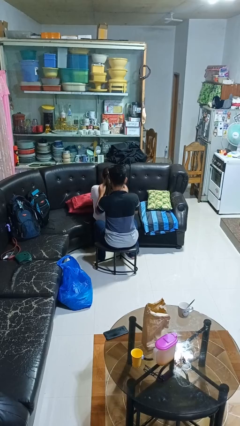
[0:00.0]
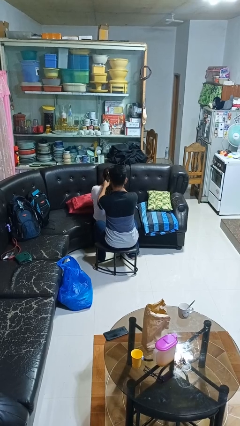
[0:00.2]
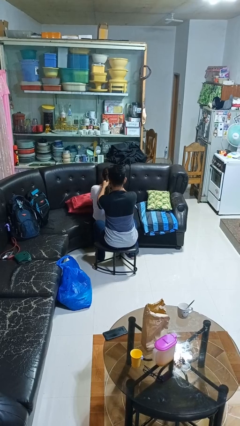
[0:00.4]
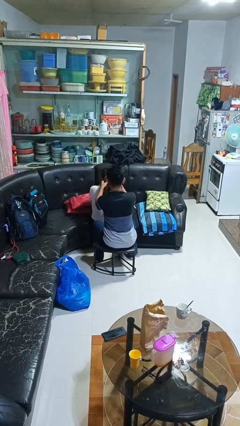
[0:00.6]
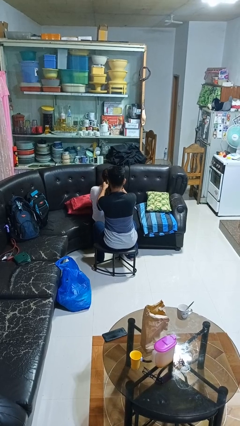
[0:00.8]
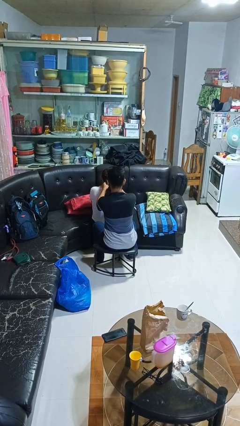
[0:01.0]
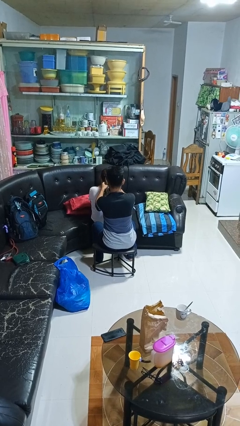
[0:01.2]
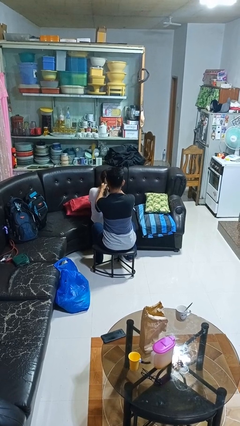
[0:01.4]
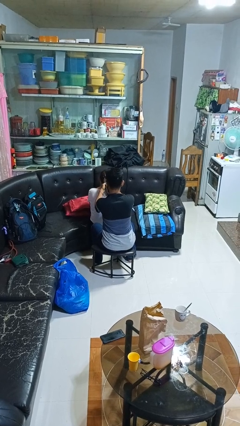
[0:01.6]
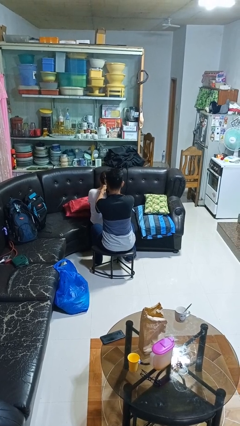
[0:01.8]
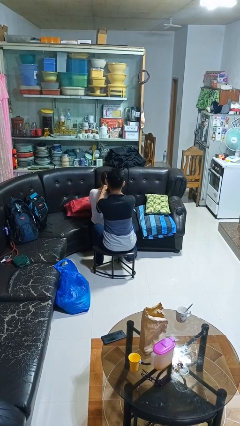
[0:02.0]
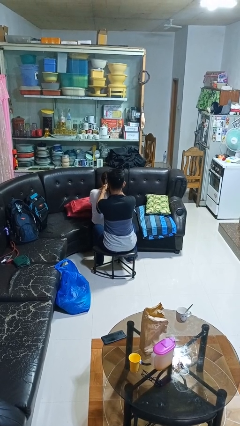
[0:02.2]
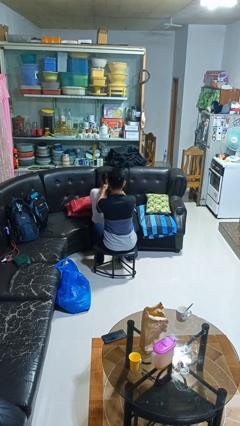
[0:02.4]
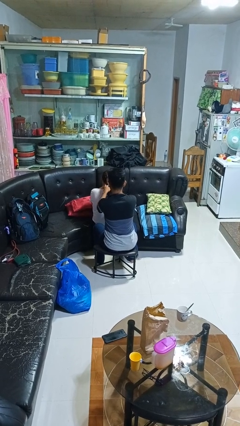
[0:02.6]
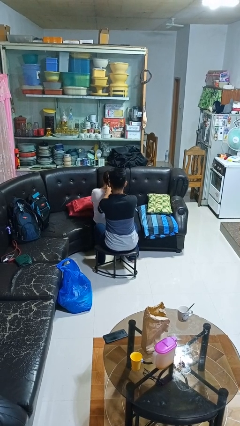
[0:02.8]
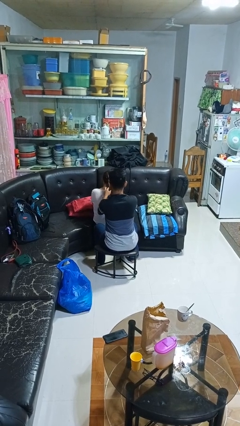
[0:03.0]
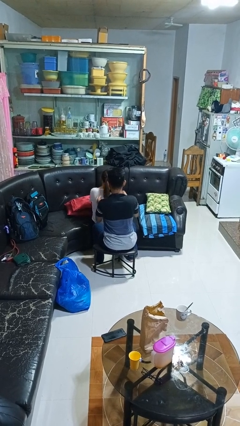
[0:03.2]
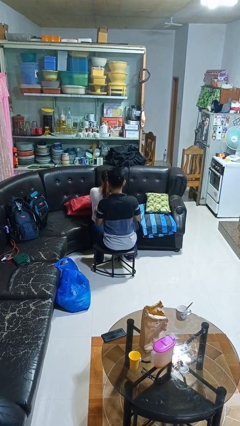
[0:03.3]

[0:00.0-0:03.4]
person braids hair of person

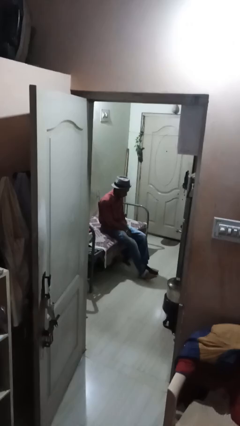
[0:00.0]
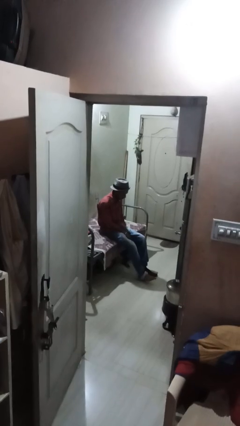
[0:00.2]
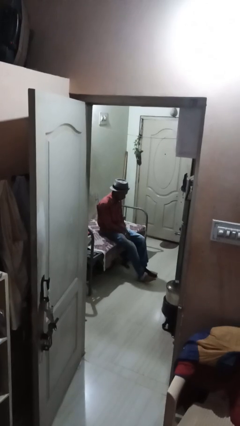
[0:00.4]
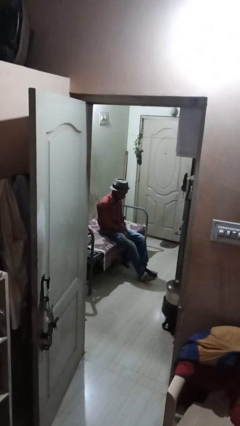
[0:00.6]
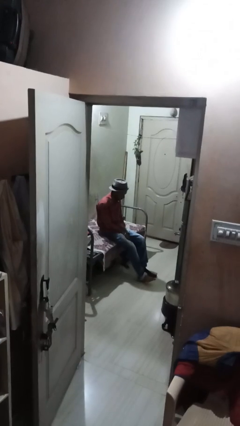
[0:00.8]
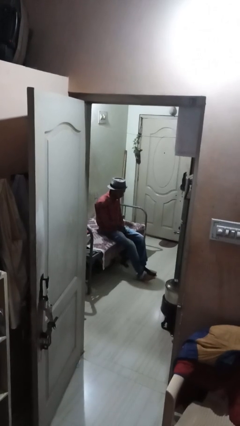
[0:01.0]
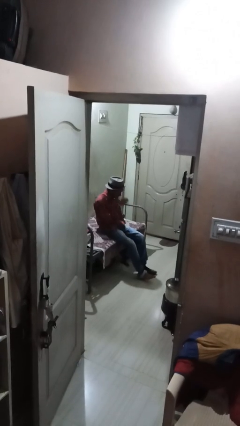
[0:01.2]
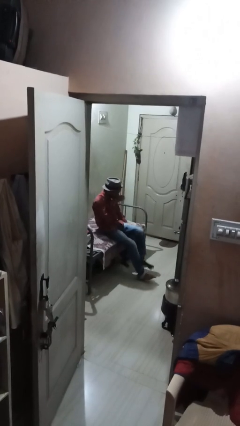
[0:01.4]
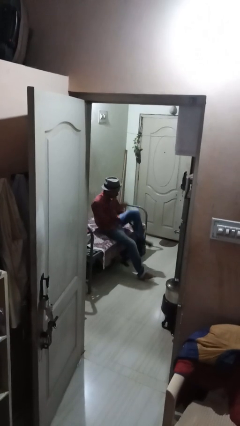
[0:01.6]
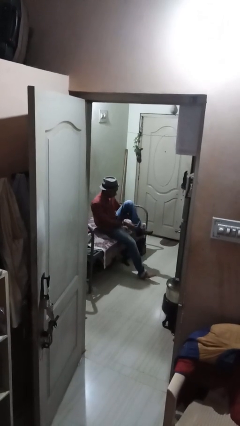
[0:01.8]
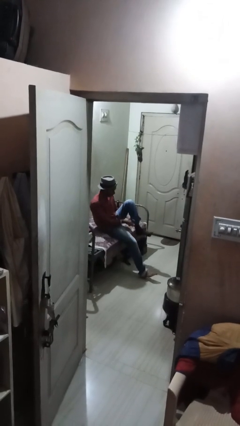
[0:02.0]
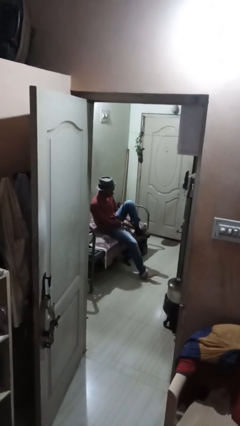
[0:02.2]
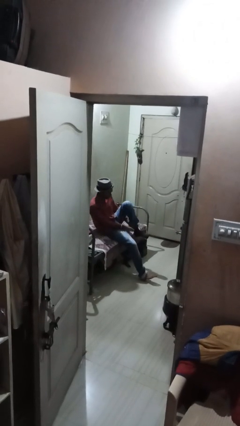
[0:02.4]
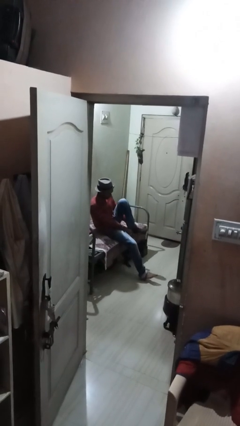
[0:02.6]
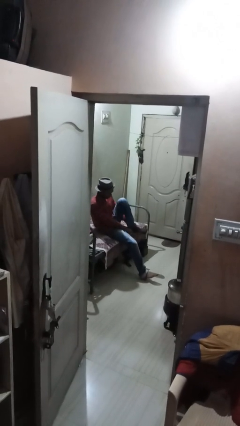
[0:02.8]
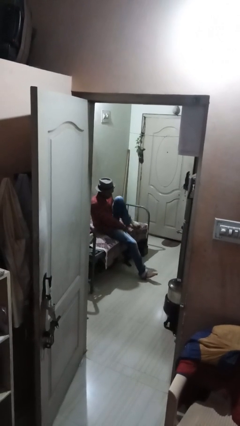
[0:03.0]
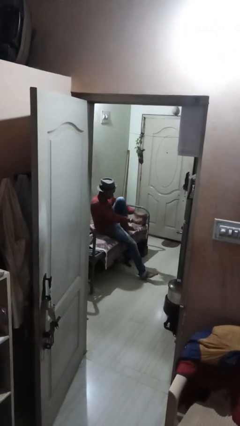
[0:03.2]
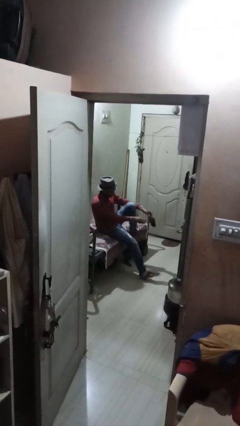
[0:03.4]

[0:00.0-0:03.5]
person takes off socks

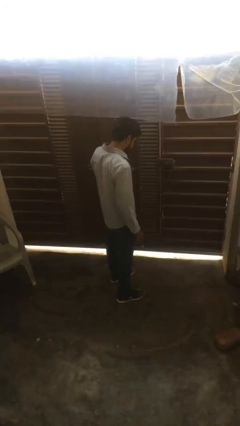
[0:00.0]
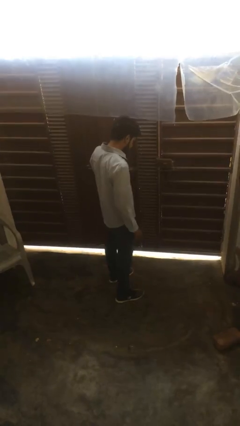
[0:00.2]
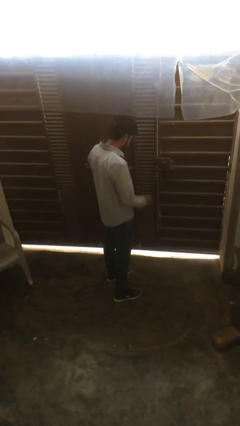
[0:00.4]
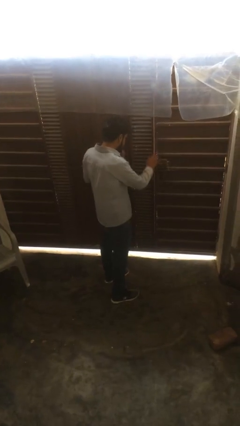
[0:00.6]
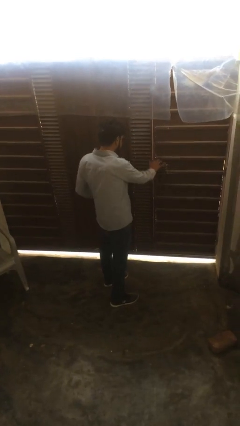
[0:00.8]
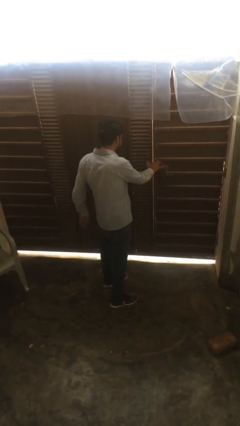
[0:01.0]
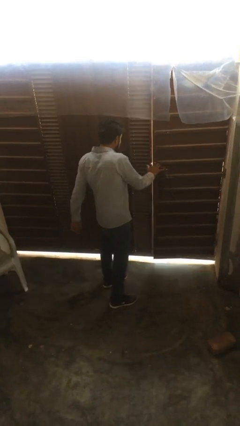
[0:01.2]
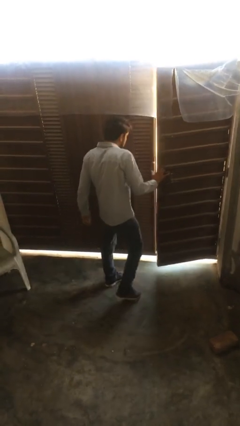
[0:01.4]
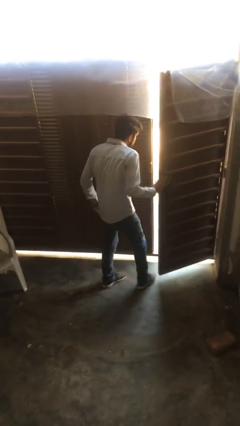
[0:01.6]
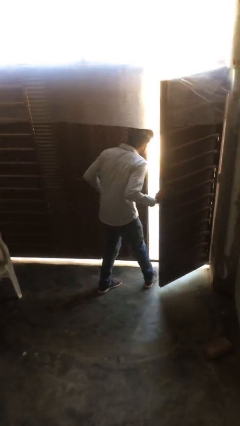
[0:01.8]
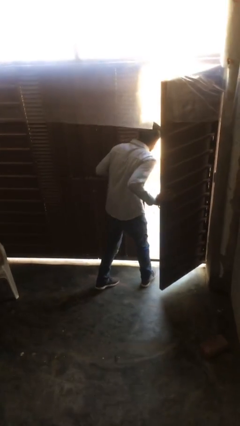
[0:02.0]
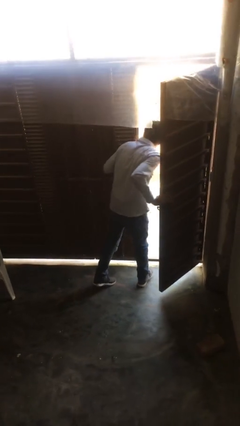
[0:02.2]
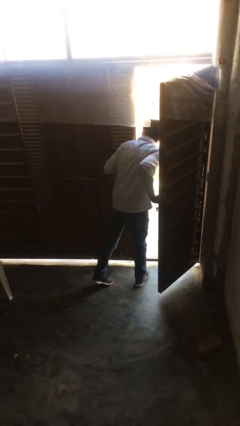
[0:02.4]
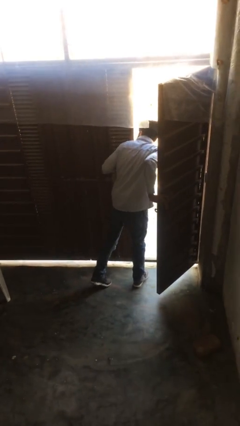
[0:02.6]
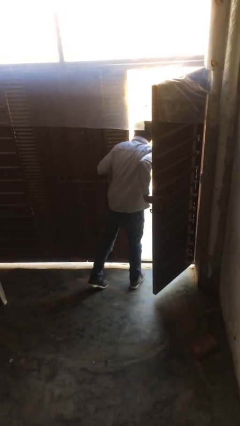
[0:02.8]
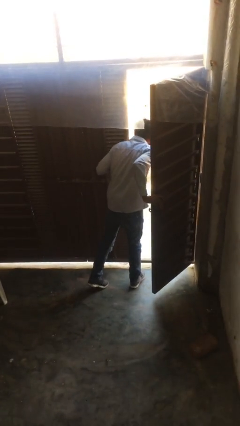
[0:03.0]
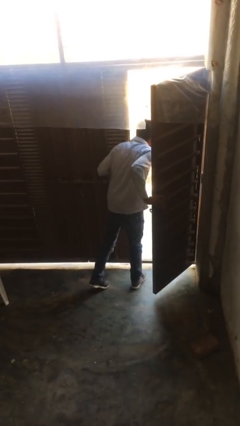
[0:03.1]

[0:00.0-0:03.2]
person opens facility door

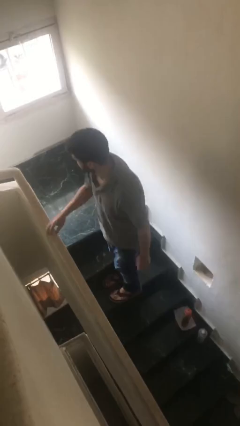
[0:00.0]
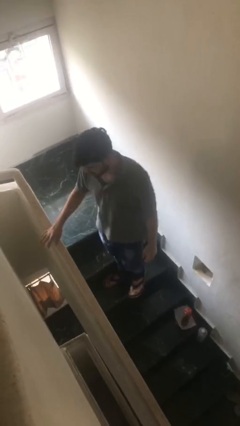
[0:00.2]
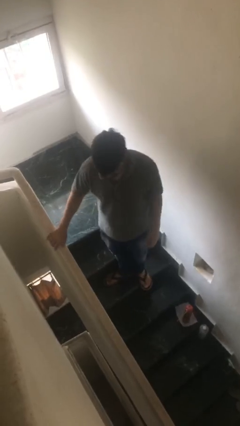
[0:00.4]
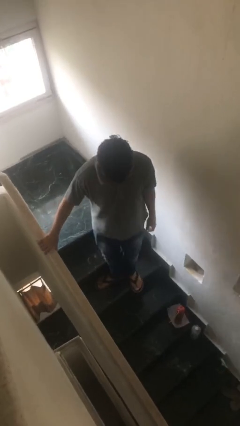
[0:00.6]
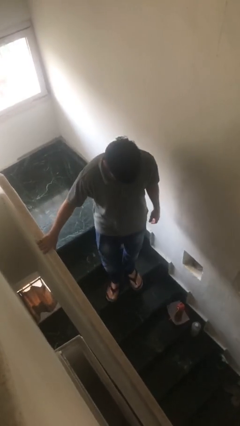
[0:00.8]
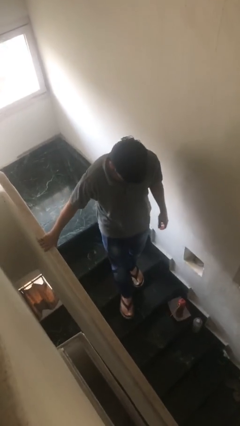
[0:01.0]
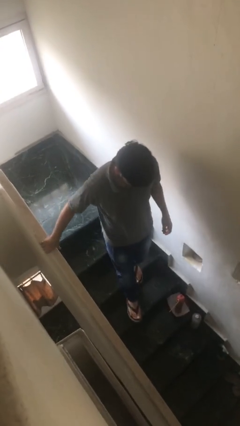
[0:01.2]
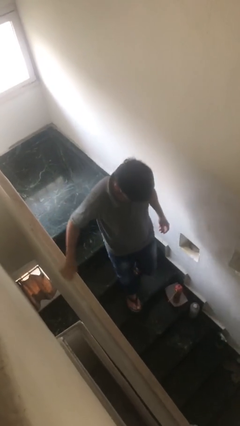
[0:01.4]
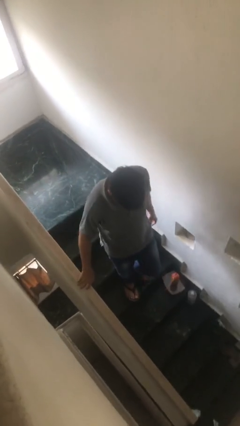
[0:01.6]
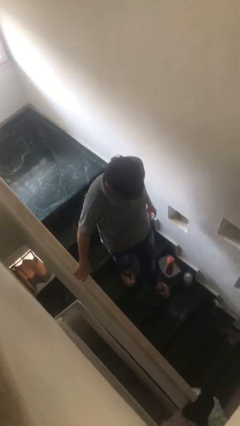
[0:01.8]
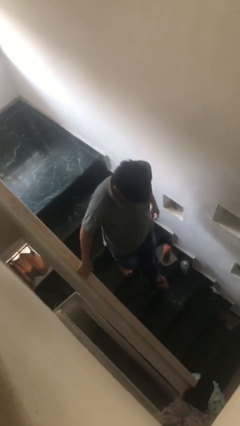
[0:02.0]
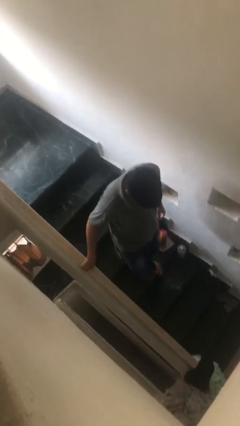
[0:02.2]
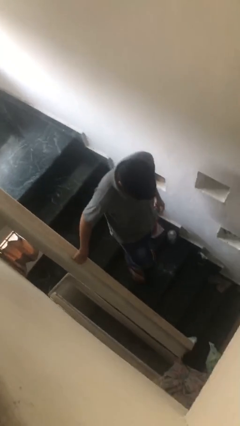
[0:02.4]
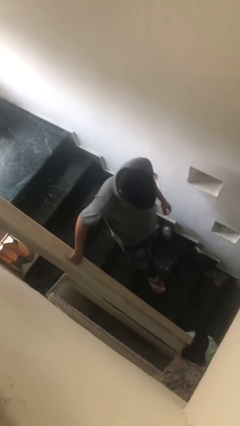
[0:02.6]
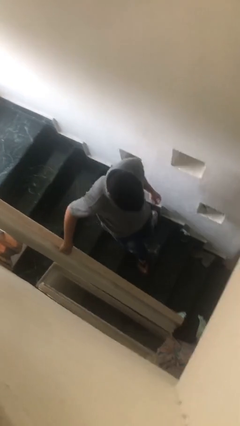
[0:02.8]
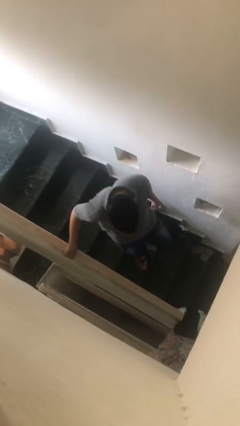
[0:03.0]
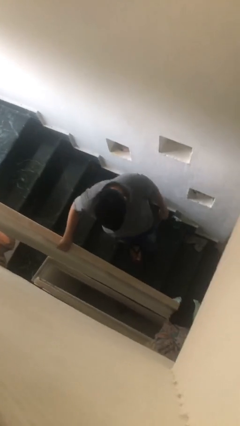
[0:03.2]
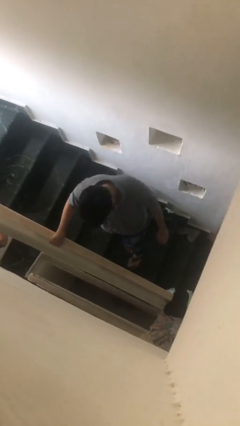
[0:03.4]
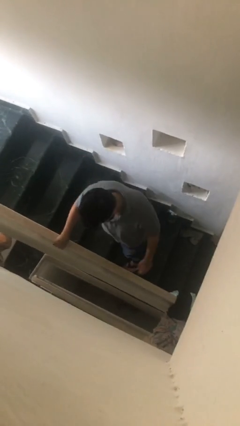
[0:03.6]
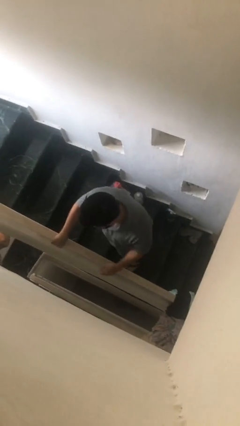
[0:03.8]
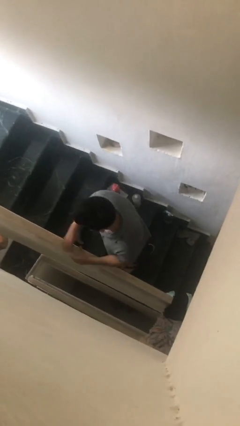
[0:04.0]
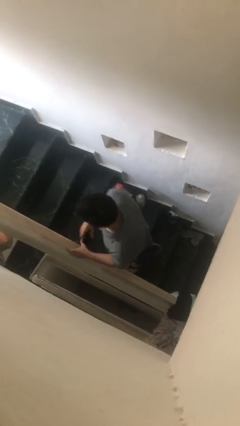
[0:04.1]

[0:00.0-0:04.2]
person climbs down stairs

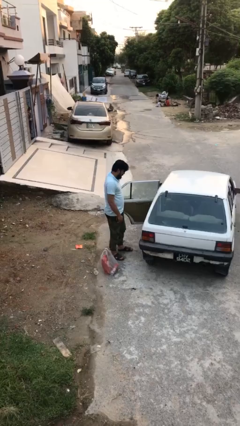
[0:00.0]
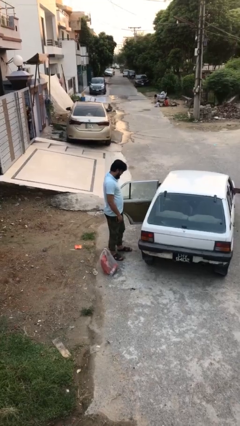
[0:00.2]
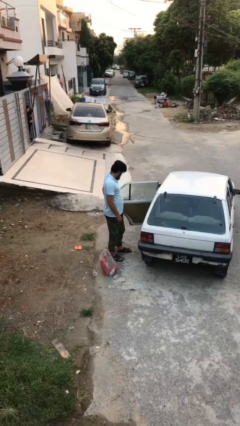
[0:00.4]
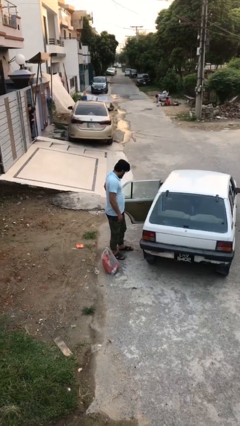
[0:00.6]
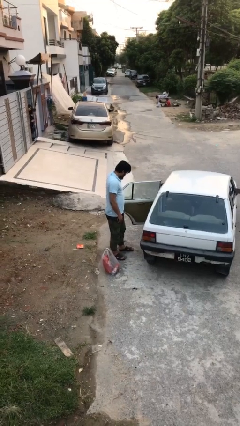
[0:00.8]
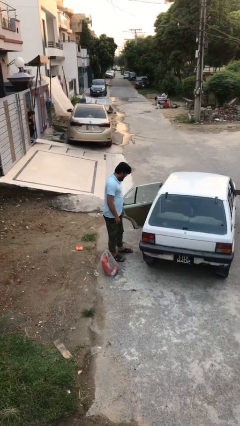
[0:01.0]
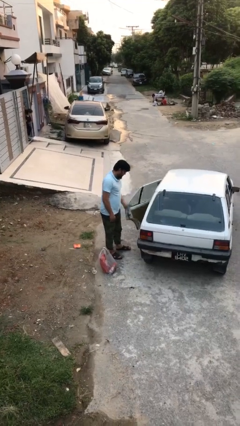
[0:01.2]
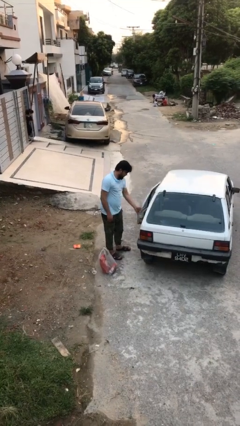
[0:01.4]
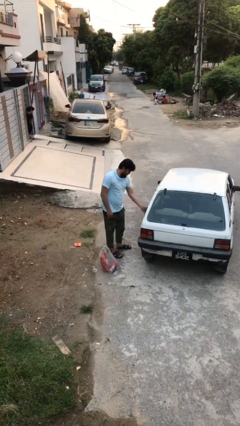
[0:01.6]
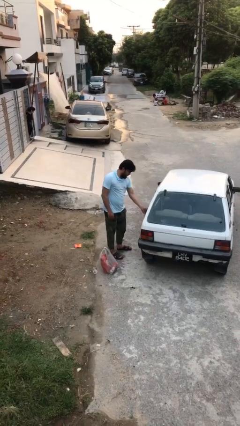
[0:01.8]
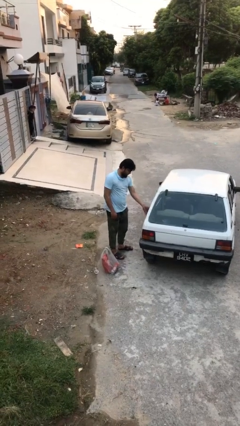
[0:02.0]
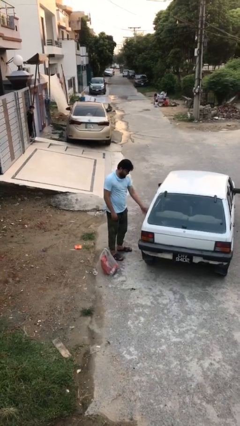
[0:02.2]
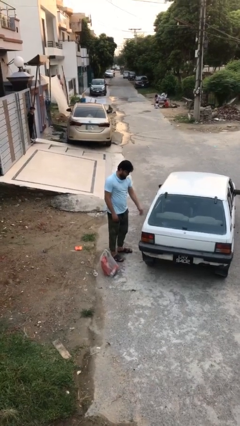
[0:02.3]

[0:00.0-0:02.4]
person closes car door

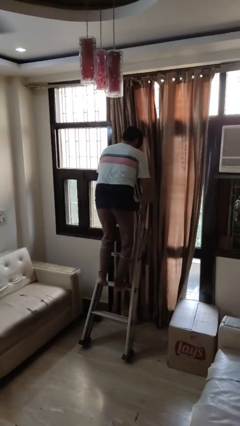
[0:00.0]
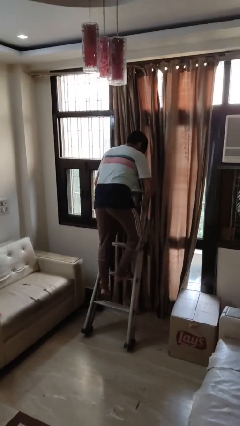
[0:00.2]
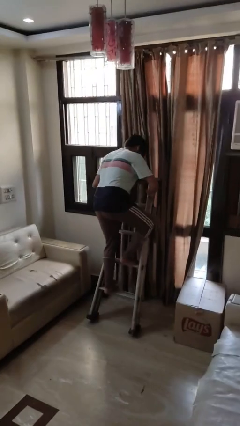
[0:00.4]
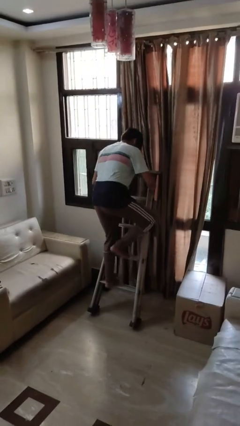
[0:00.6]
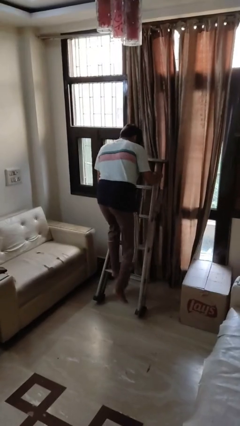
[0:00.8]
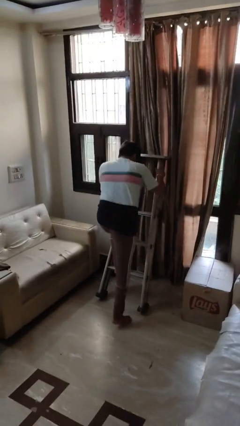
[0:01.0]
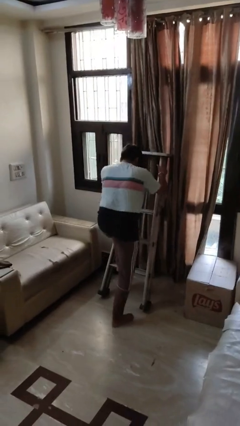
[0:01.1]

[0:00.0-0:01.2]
person climbs down ladder
